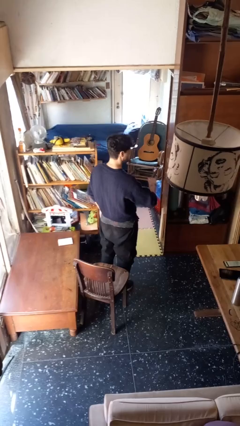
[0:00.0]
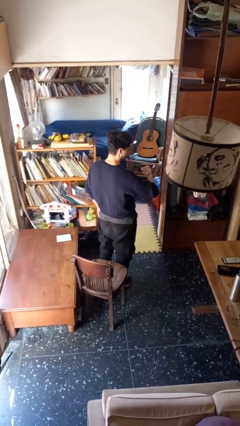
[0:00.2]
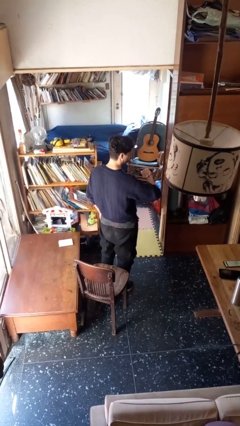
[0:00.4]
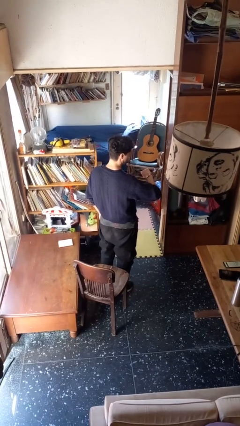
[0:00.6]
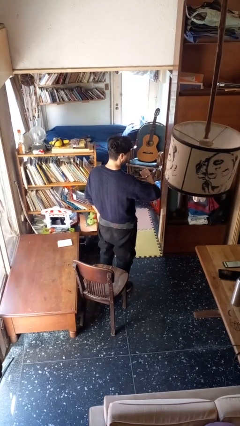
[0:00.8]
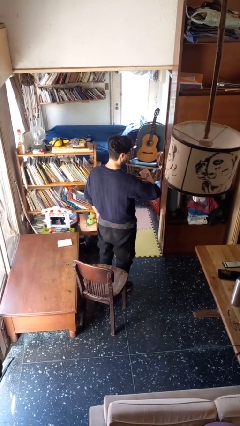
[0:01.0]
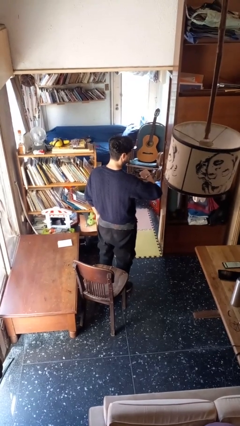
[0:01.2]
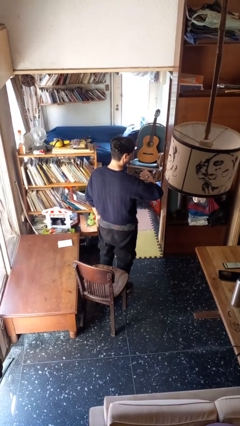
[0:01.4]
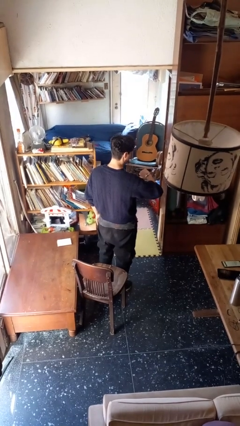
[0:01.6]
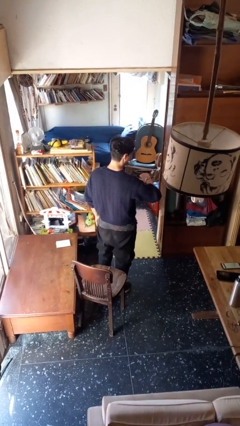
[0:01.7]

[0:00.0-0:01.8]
person looks at wristwatch

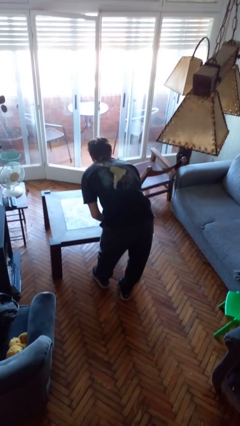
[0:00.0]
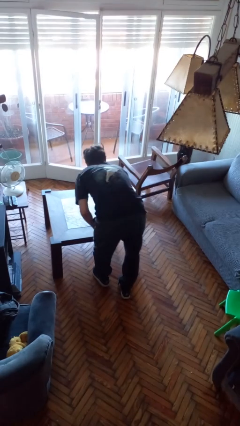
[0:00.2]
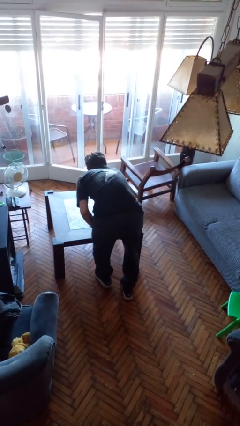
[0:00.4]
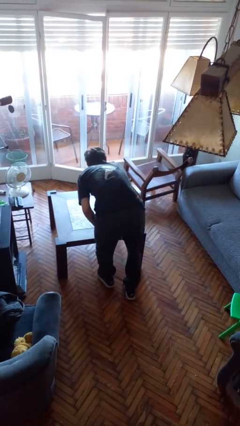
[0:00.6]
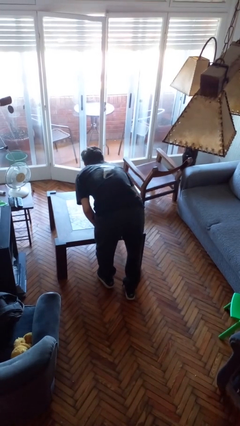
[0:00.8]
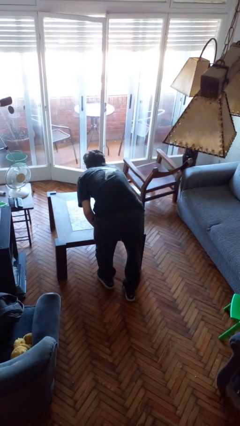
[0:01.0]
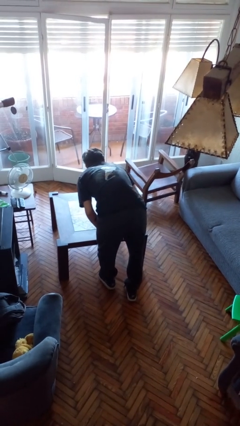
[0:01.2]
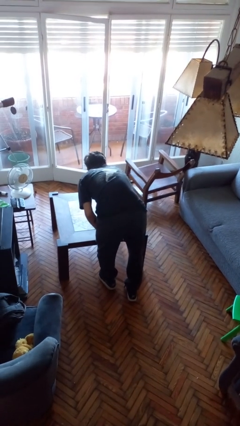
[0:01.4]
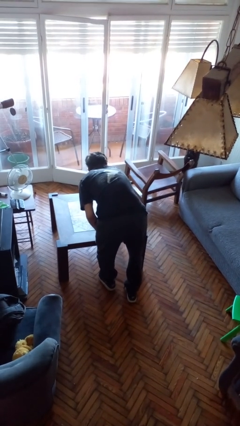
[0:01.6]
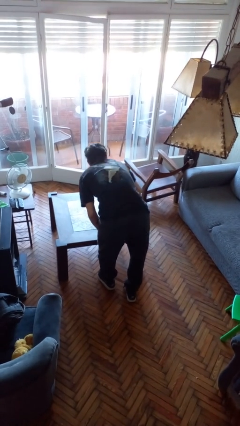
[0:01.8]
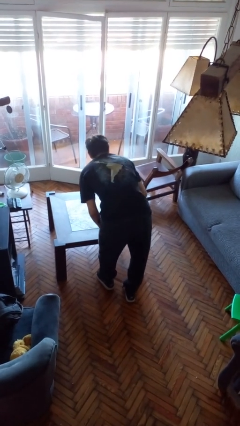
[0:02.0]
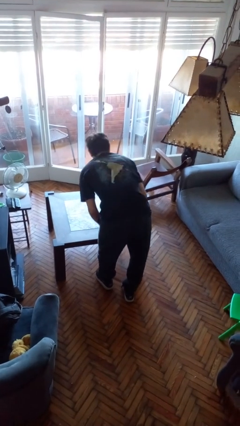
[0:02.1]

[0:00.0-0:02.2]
person cleans table with rag

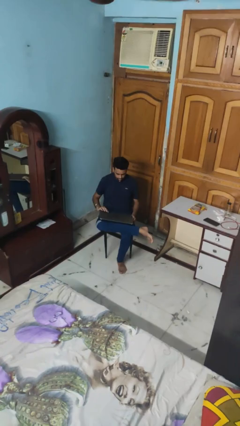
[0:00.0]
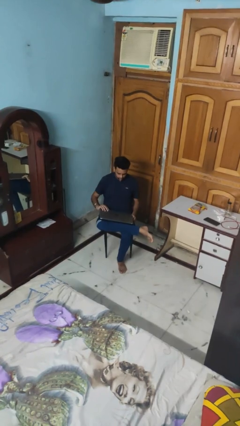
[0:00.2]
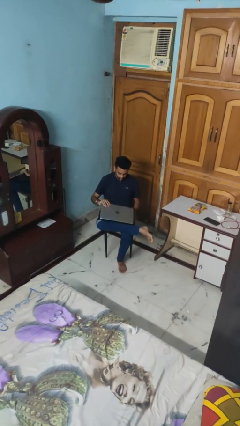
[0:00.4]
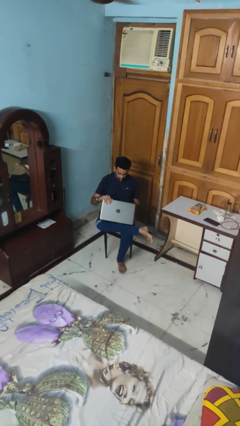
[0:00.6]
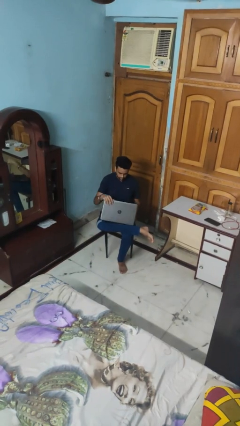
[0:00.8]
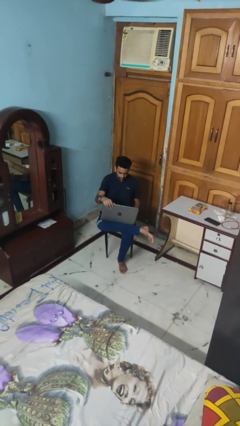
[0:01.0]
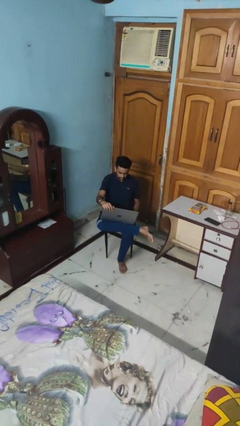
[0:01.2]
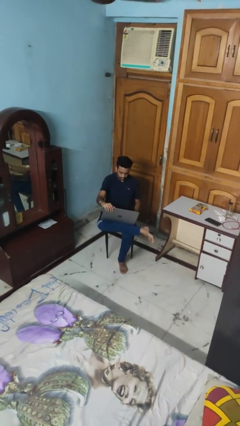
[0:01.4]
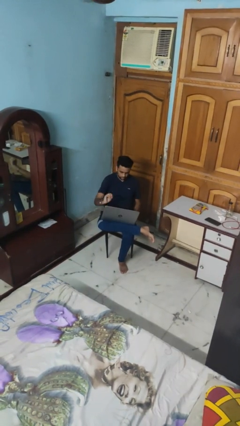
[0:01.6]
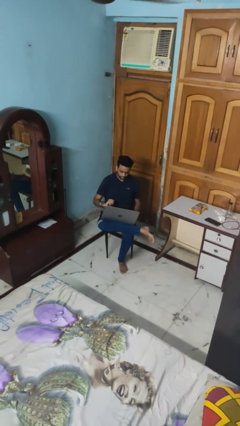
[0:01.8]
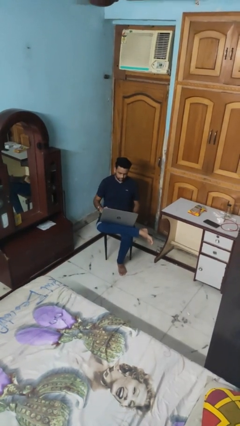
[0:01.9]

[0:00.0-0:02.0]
person opens laptop

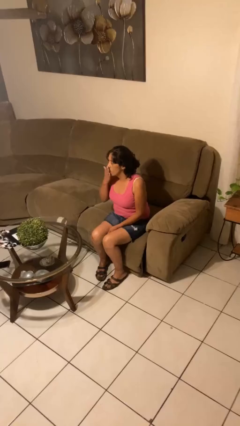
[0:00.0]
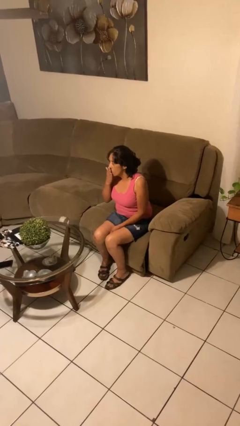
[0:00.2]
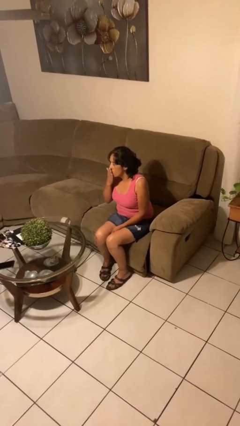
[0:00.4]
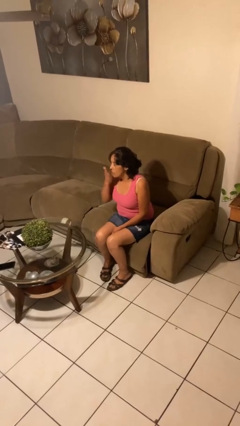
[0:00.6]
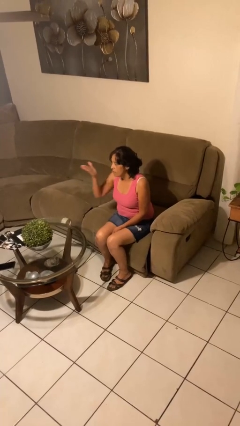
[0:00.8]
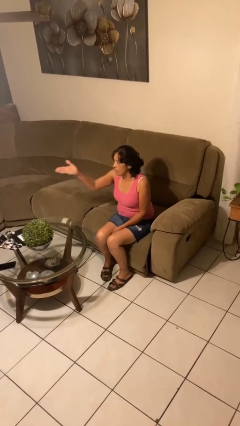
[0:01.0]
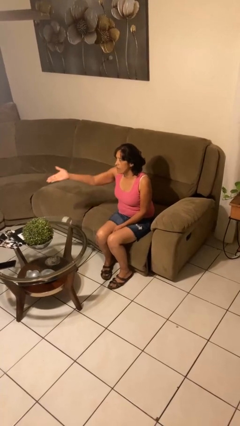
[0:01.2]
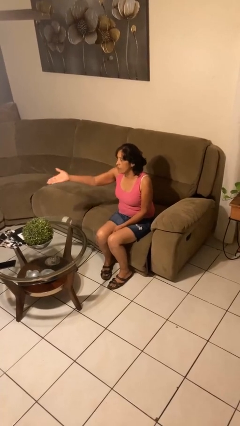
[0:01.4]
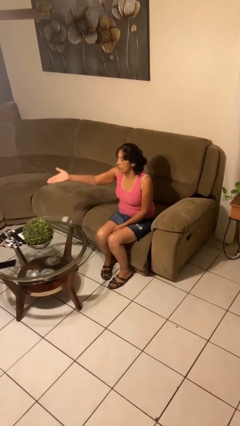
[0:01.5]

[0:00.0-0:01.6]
person gestures blow kiss

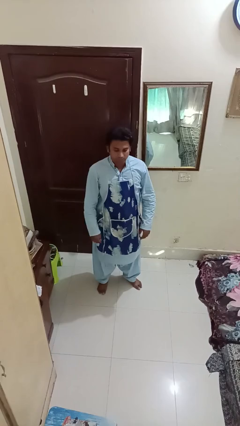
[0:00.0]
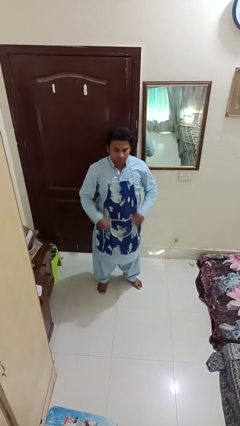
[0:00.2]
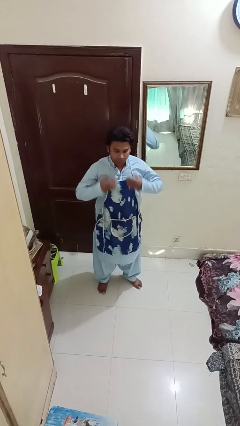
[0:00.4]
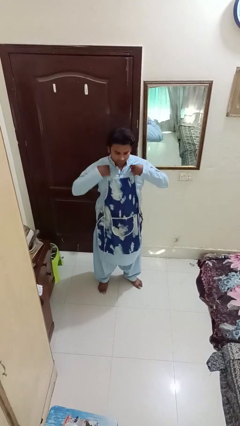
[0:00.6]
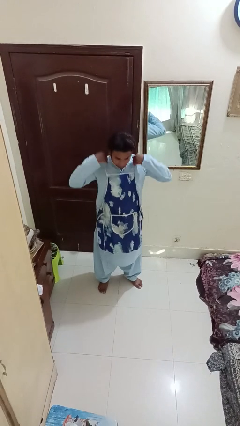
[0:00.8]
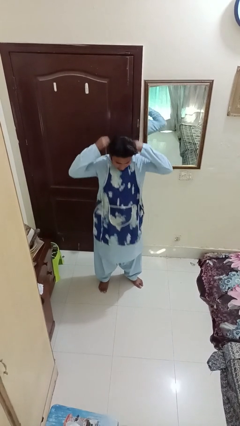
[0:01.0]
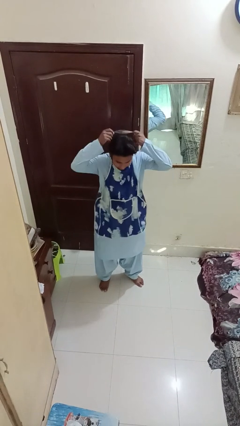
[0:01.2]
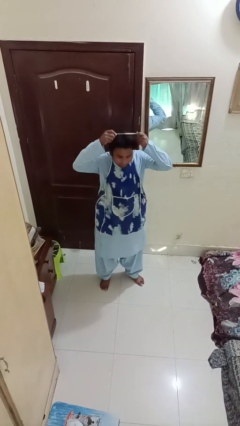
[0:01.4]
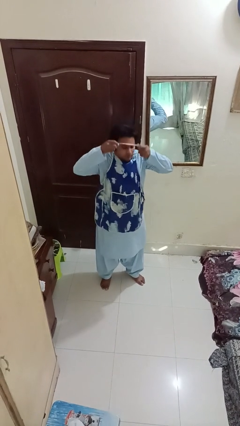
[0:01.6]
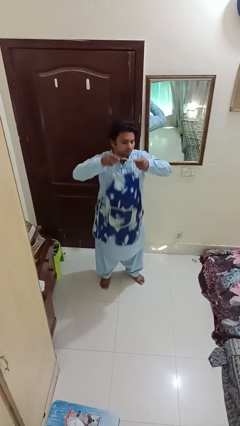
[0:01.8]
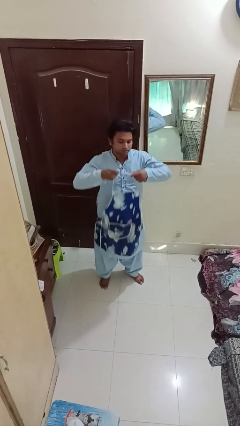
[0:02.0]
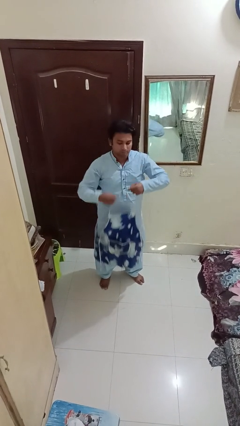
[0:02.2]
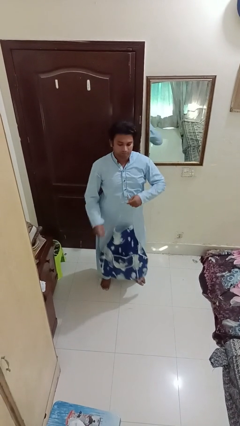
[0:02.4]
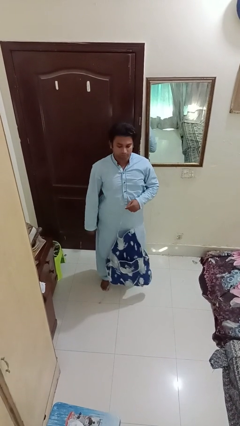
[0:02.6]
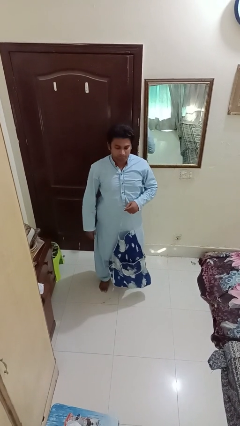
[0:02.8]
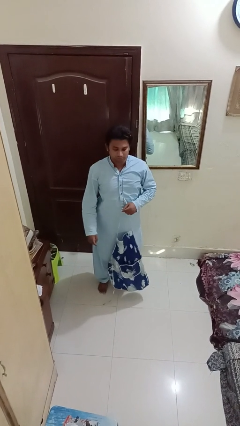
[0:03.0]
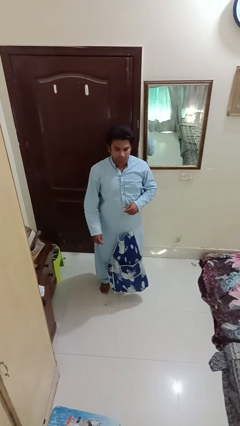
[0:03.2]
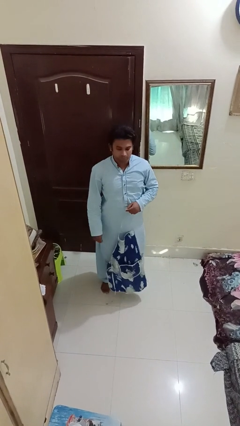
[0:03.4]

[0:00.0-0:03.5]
person takes off apron

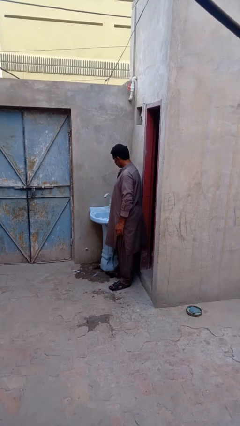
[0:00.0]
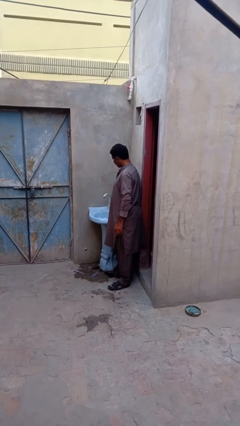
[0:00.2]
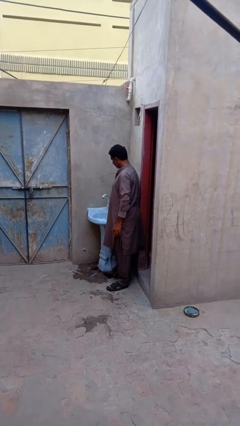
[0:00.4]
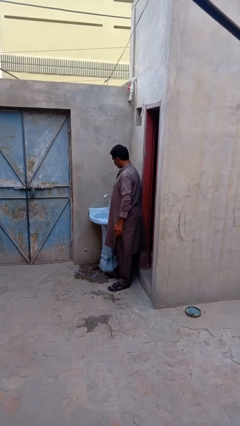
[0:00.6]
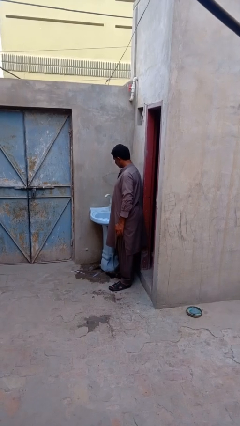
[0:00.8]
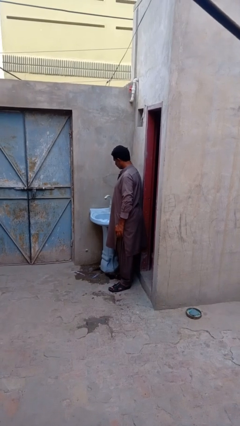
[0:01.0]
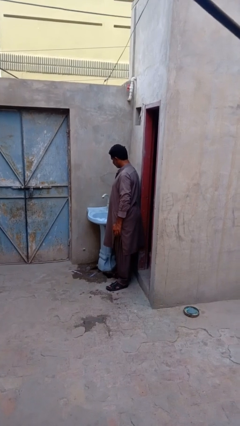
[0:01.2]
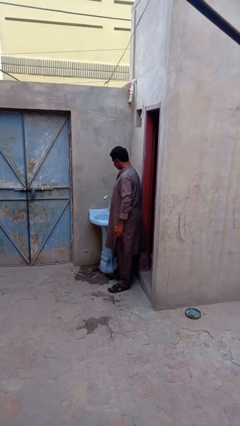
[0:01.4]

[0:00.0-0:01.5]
person turns off faucet

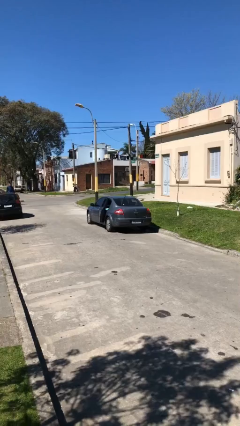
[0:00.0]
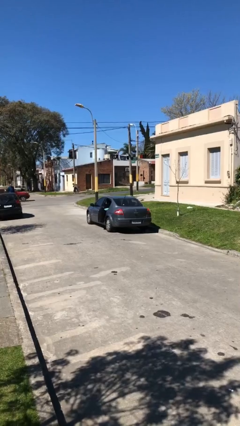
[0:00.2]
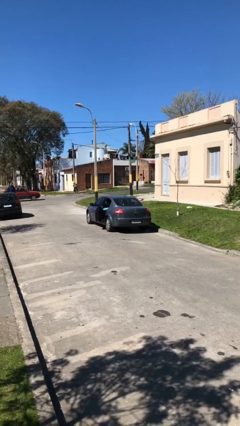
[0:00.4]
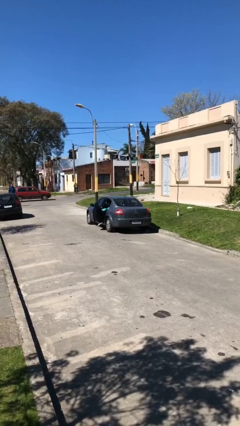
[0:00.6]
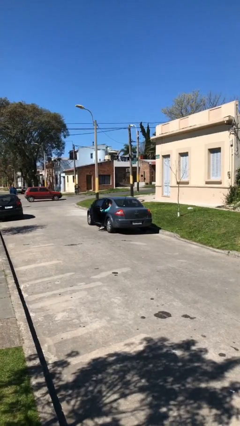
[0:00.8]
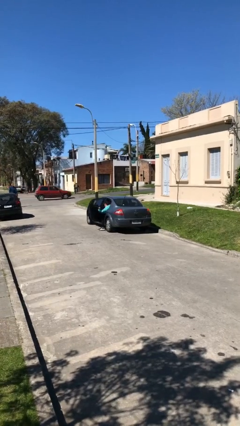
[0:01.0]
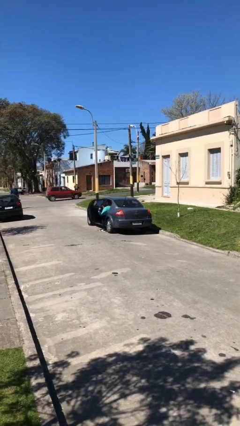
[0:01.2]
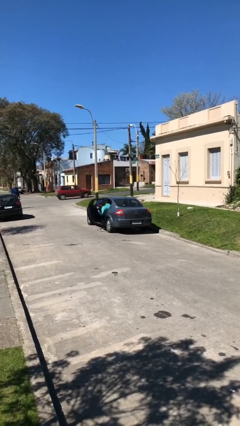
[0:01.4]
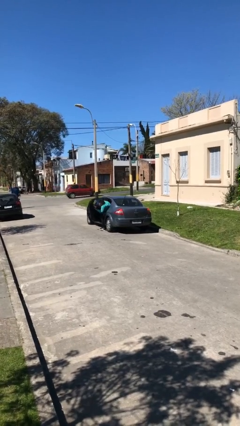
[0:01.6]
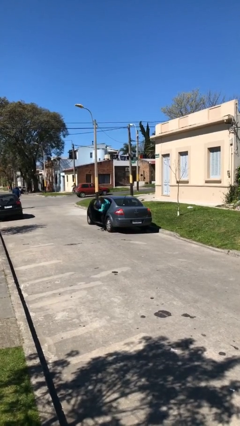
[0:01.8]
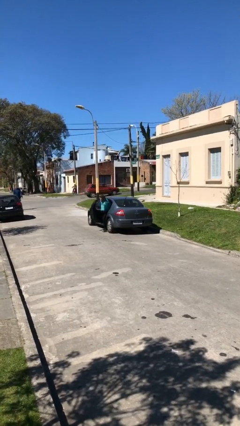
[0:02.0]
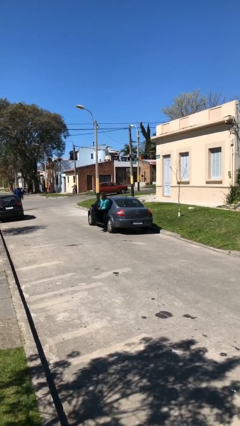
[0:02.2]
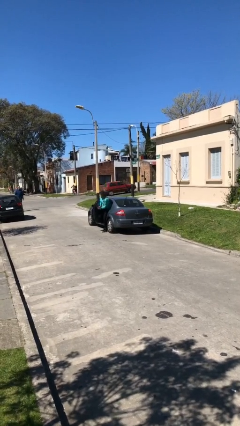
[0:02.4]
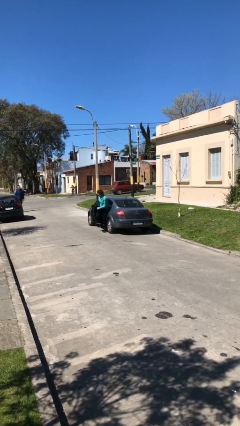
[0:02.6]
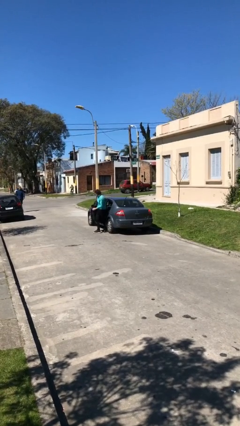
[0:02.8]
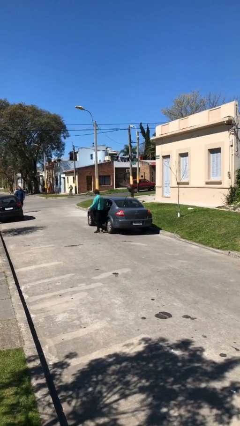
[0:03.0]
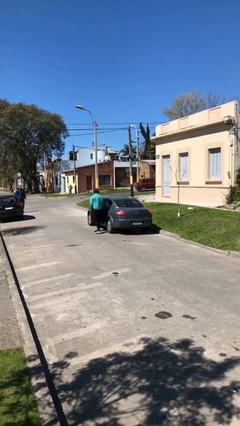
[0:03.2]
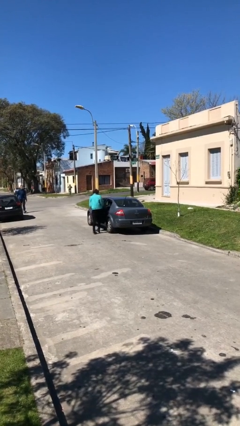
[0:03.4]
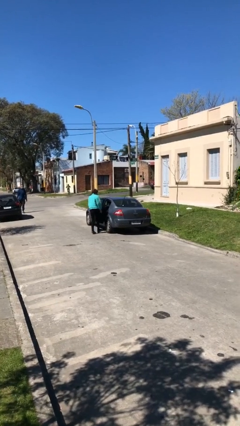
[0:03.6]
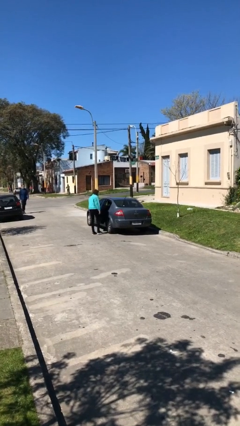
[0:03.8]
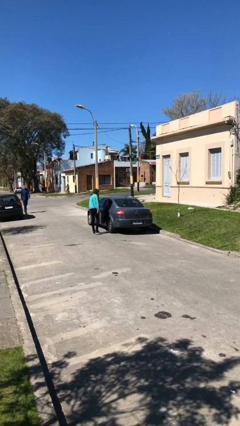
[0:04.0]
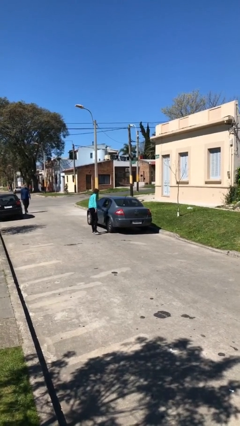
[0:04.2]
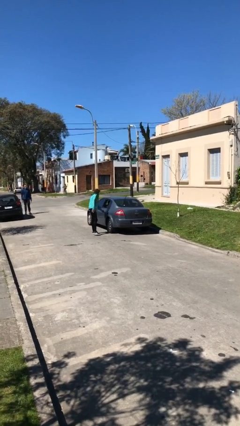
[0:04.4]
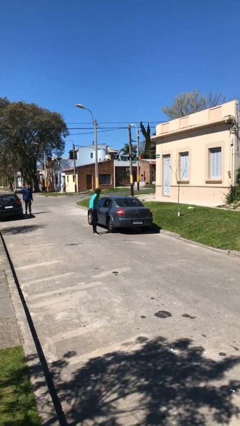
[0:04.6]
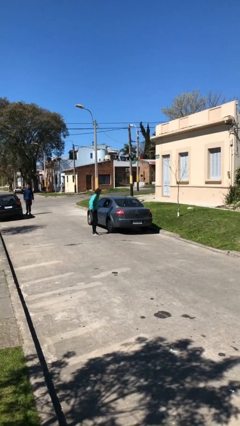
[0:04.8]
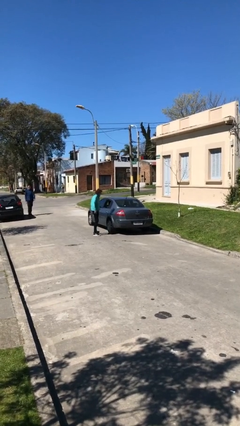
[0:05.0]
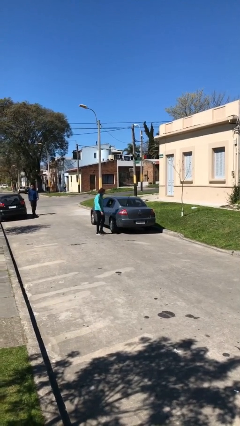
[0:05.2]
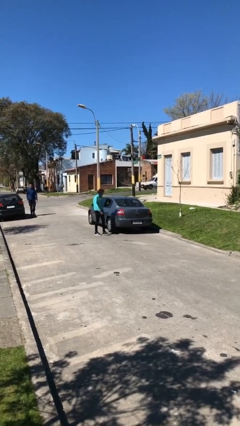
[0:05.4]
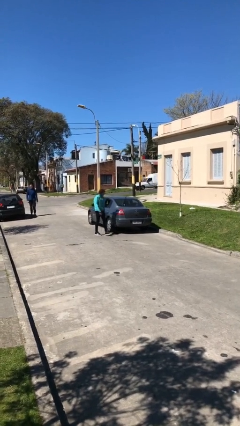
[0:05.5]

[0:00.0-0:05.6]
car drops off person
